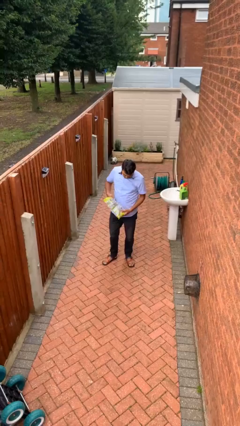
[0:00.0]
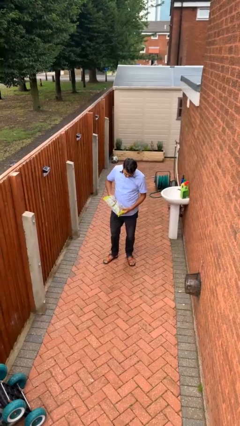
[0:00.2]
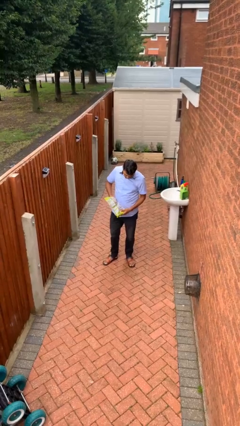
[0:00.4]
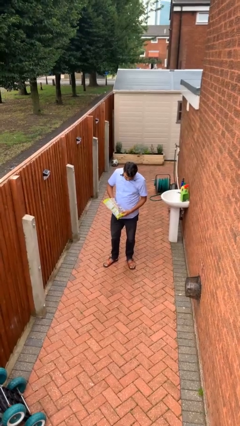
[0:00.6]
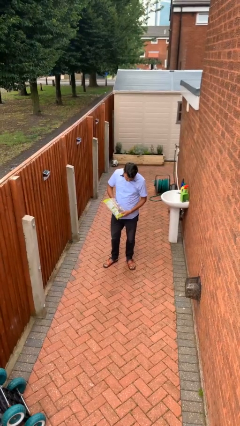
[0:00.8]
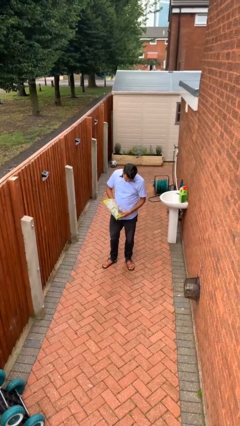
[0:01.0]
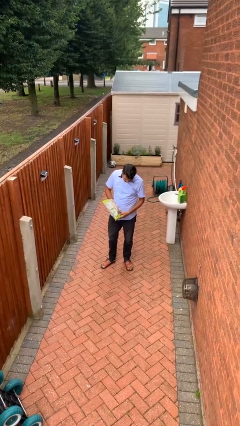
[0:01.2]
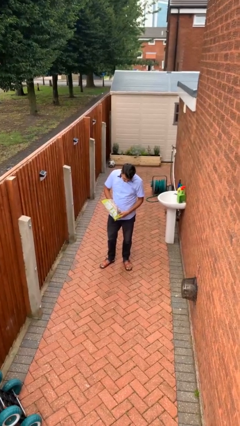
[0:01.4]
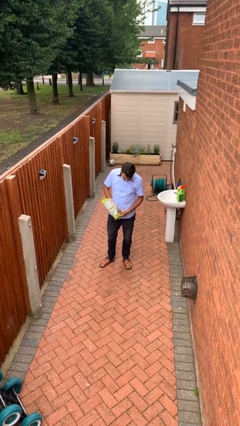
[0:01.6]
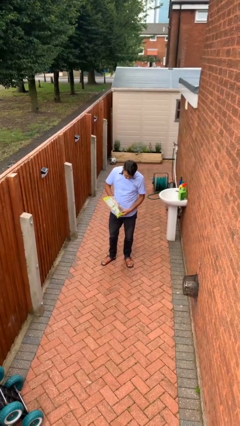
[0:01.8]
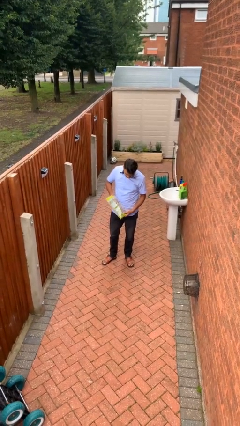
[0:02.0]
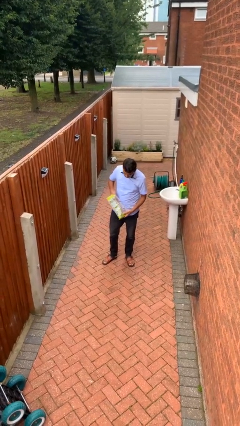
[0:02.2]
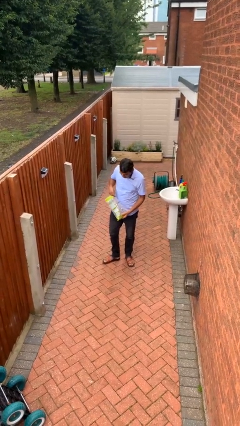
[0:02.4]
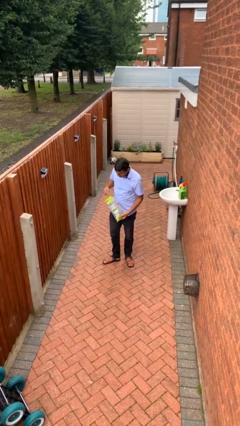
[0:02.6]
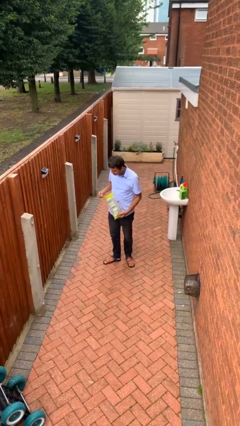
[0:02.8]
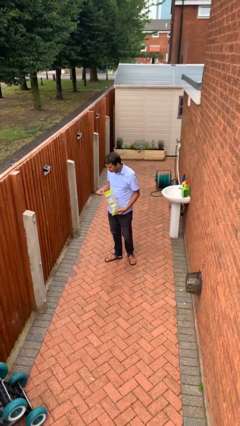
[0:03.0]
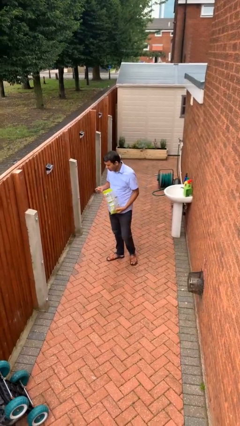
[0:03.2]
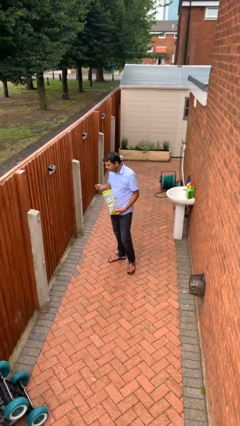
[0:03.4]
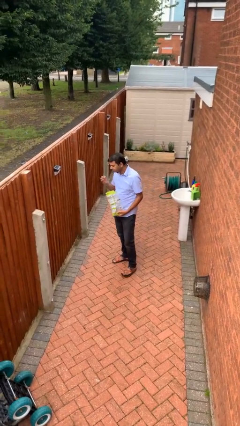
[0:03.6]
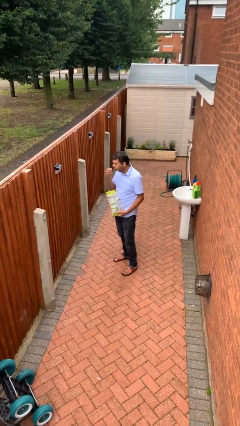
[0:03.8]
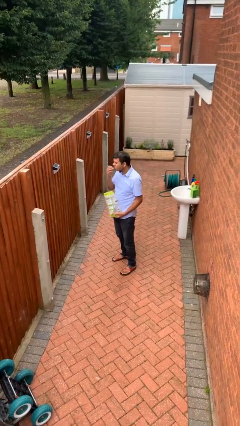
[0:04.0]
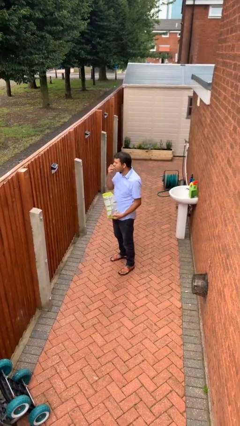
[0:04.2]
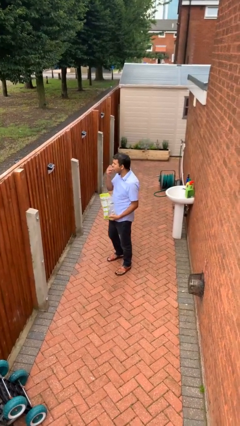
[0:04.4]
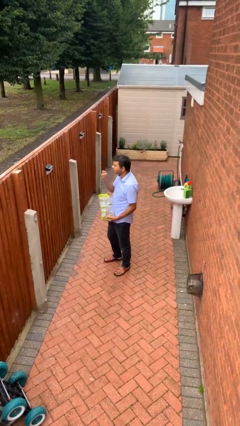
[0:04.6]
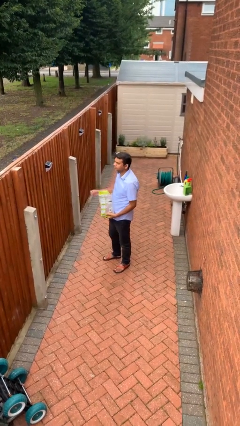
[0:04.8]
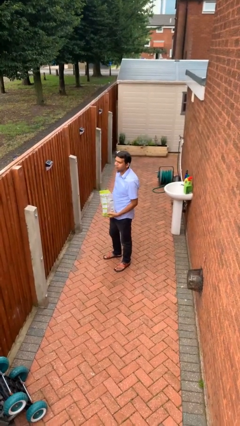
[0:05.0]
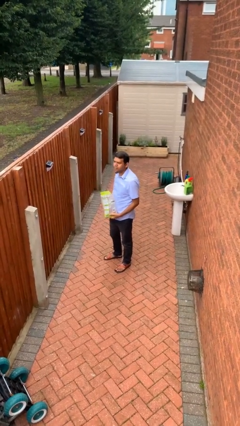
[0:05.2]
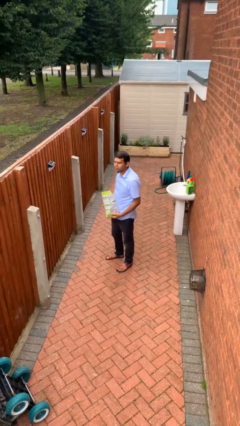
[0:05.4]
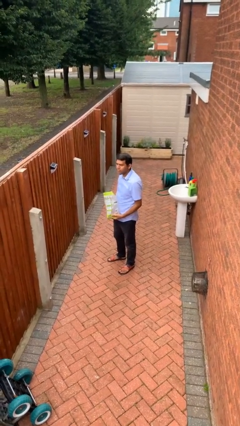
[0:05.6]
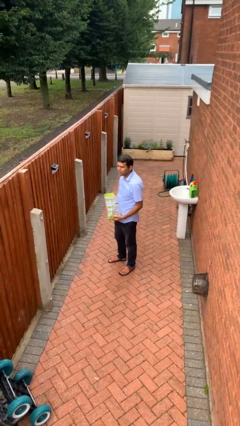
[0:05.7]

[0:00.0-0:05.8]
person eats snack from bag

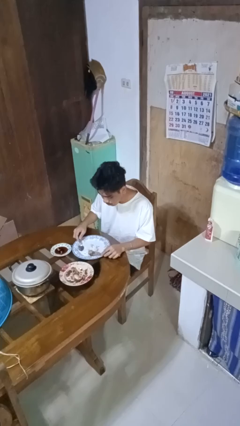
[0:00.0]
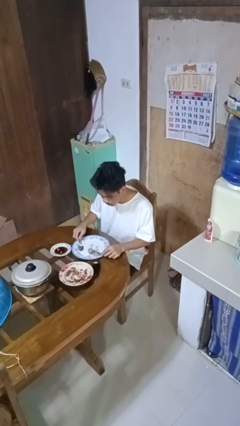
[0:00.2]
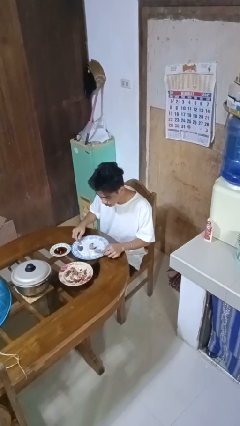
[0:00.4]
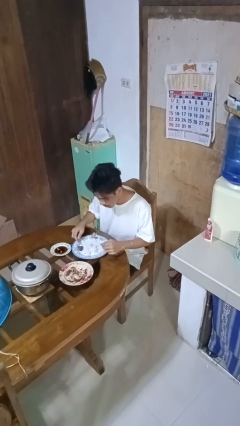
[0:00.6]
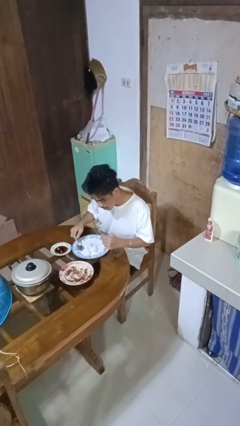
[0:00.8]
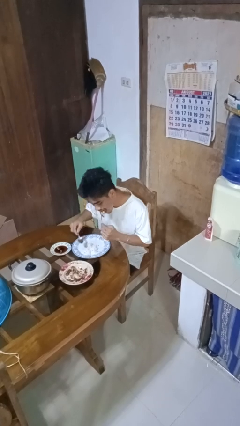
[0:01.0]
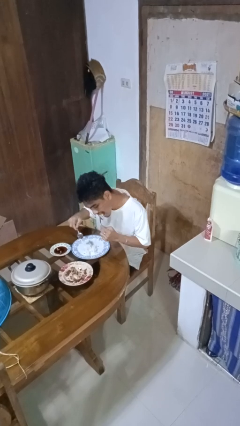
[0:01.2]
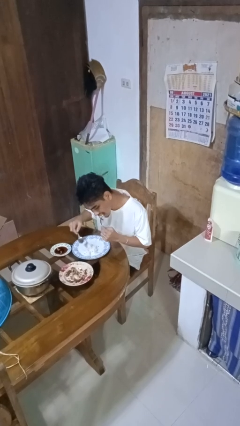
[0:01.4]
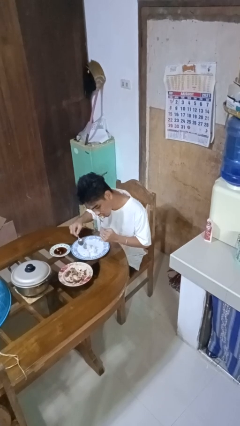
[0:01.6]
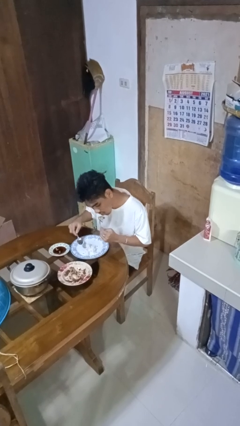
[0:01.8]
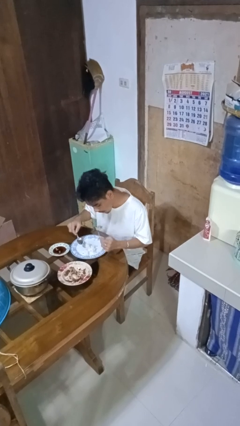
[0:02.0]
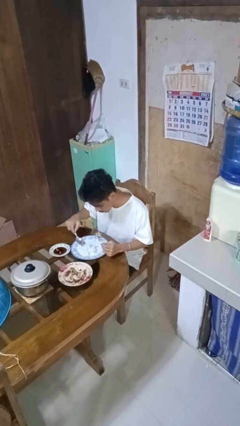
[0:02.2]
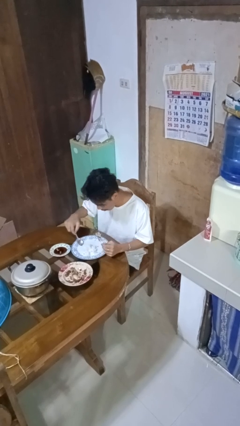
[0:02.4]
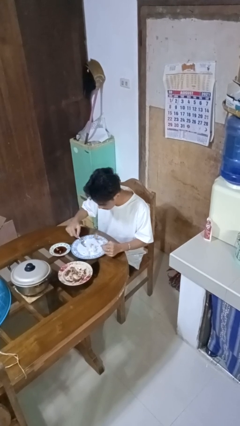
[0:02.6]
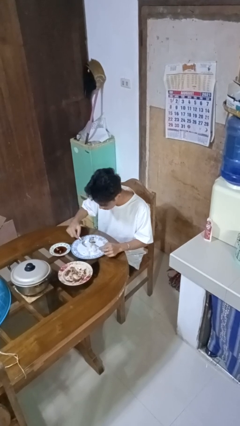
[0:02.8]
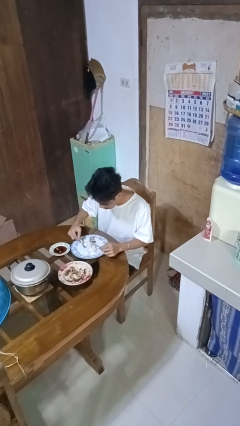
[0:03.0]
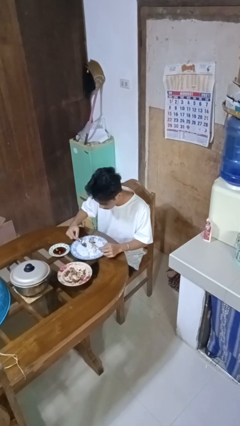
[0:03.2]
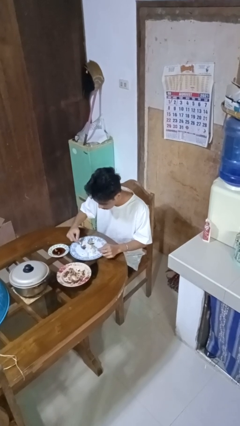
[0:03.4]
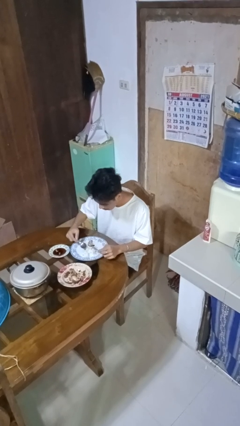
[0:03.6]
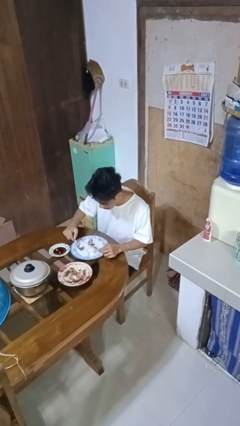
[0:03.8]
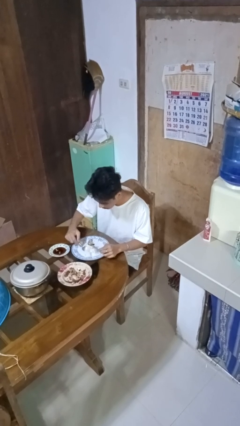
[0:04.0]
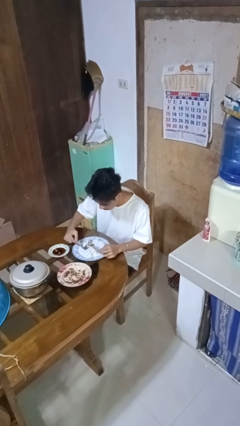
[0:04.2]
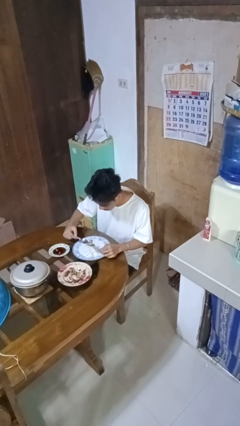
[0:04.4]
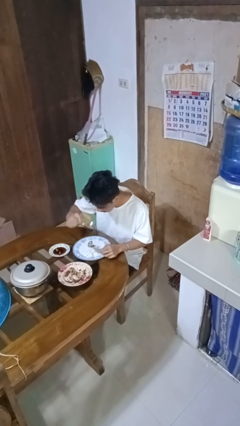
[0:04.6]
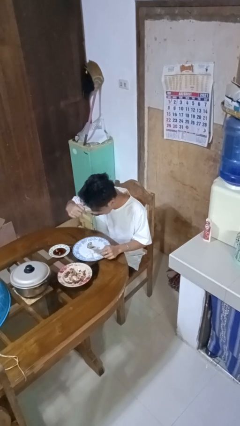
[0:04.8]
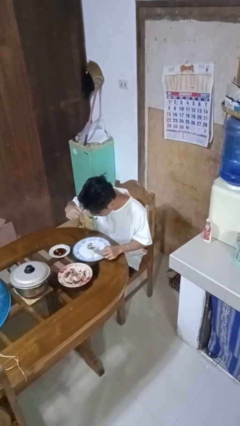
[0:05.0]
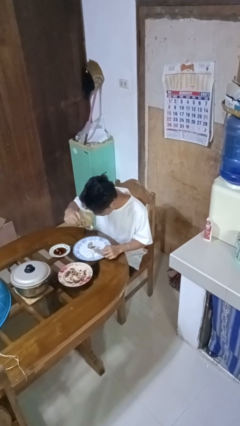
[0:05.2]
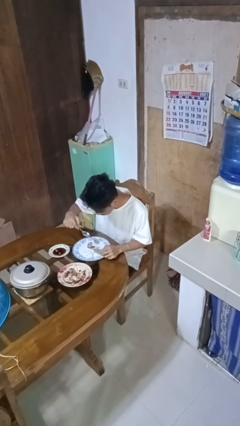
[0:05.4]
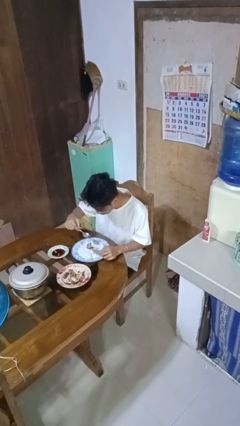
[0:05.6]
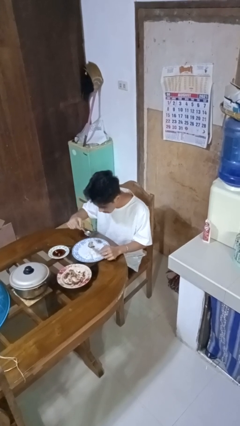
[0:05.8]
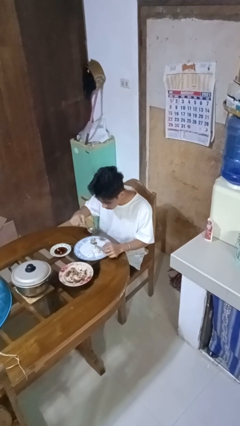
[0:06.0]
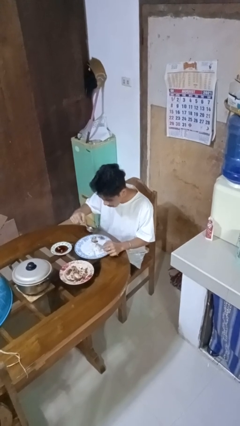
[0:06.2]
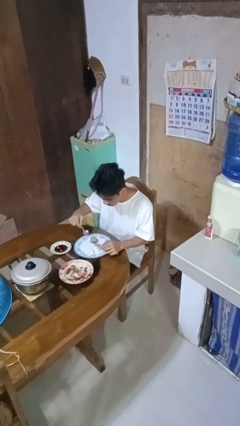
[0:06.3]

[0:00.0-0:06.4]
person eats with utensil

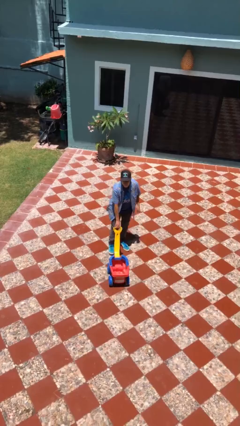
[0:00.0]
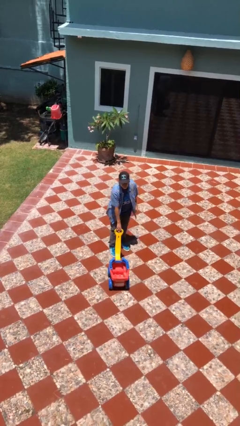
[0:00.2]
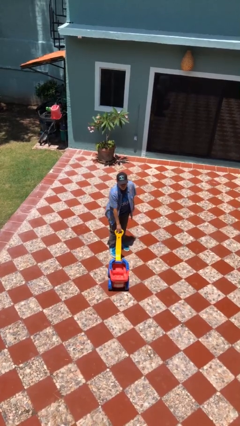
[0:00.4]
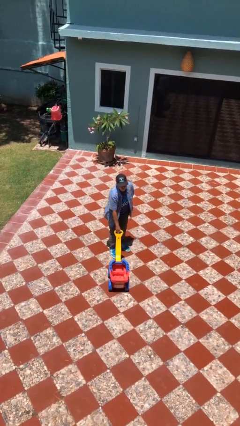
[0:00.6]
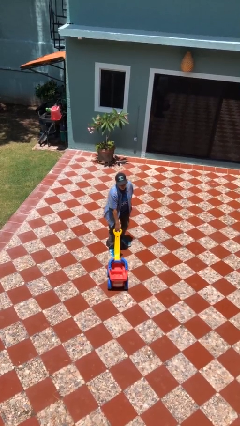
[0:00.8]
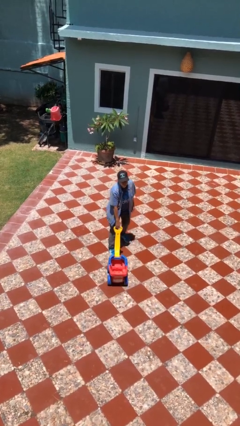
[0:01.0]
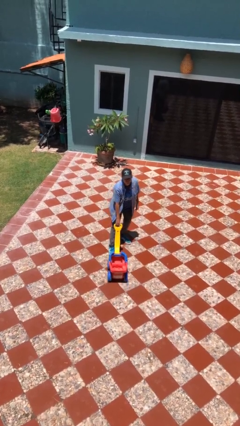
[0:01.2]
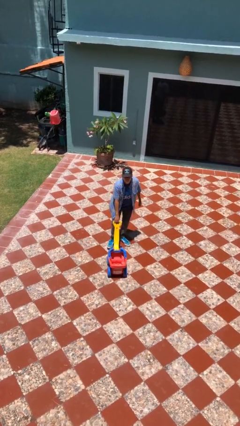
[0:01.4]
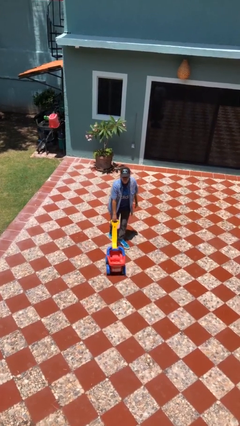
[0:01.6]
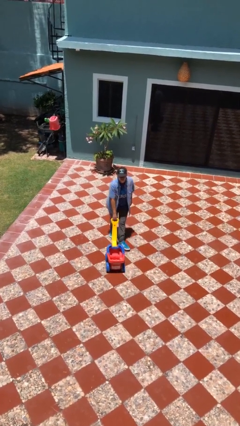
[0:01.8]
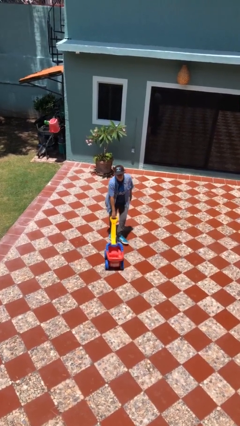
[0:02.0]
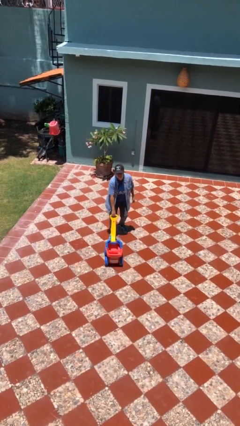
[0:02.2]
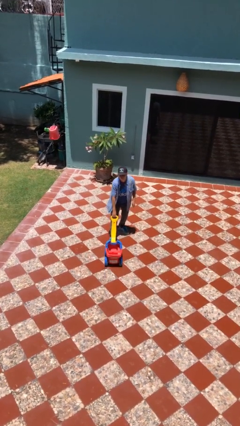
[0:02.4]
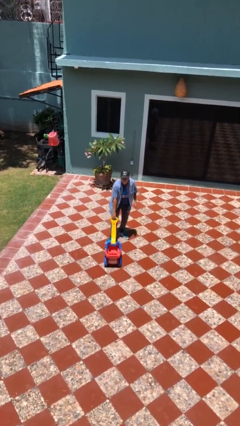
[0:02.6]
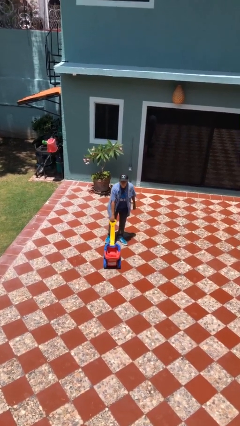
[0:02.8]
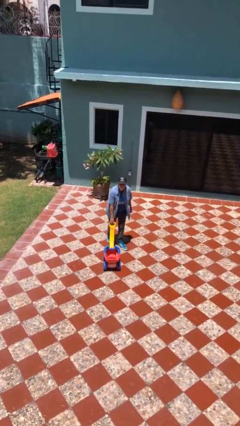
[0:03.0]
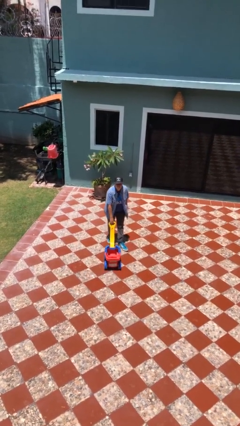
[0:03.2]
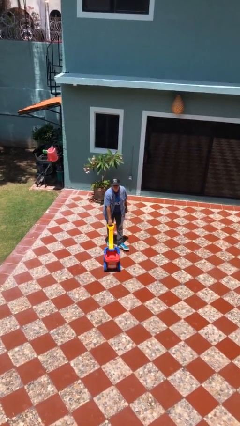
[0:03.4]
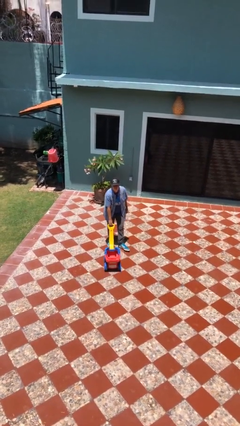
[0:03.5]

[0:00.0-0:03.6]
person pulls wheeled cart

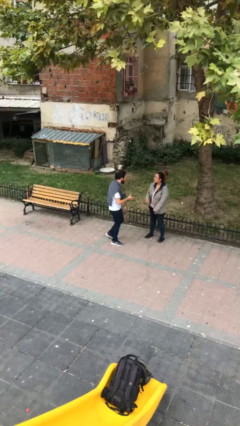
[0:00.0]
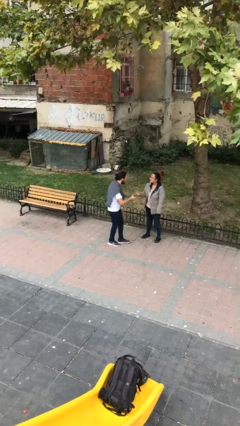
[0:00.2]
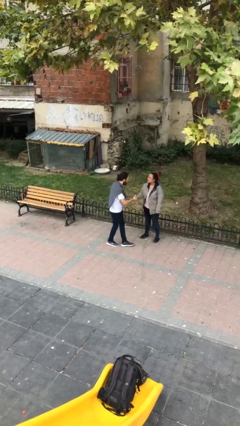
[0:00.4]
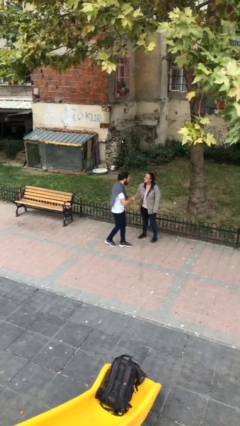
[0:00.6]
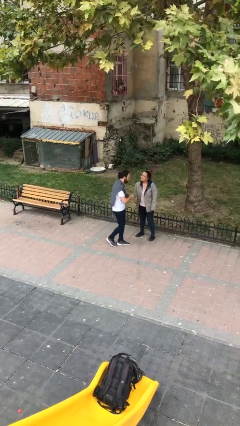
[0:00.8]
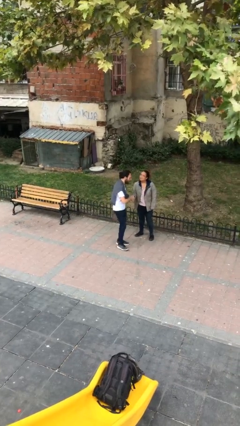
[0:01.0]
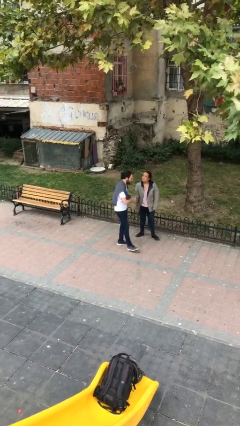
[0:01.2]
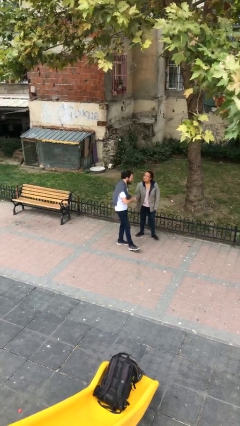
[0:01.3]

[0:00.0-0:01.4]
person shakes hand

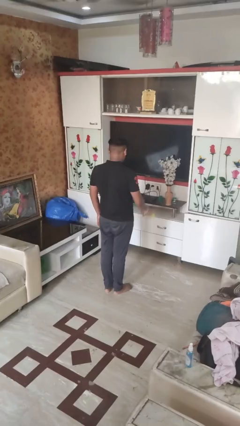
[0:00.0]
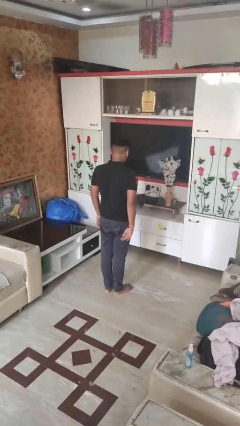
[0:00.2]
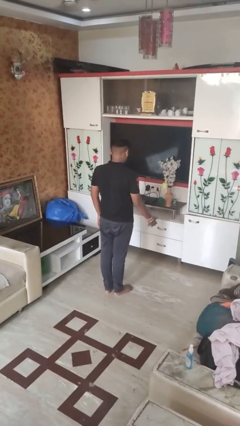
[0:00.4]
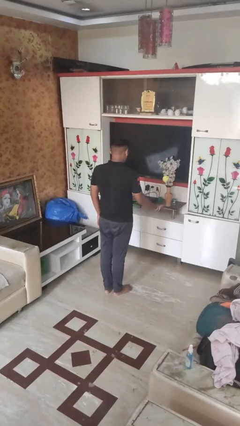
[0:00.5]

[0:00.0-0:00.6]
person bounces ball on floor
